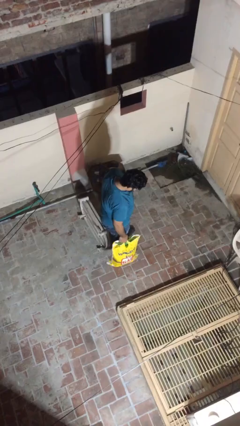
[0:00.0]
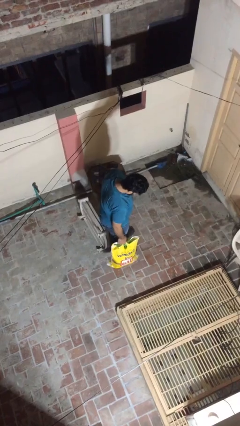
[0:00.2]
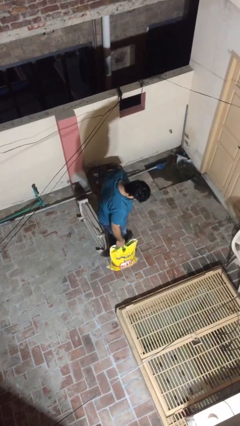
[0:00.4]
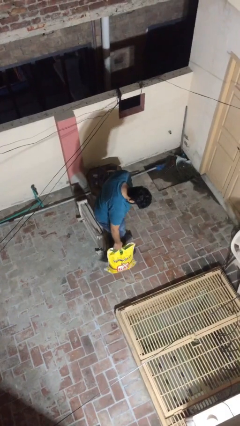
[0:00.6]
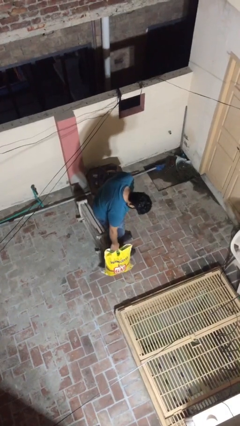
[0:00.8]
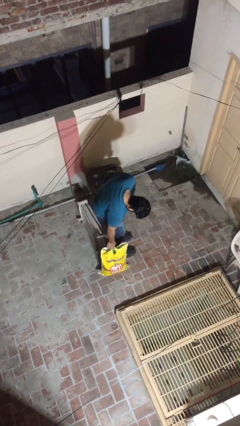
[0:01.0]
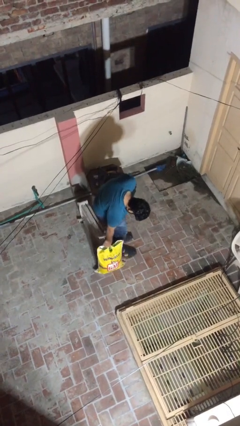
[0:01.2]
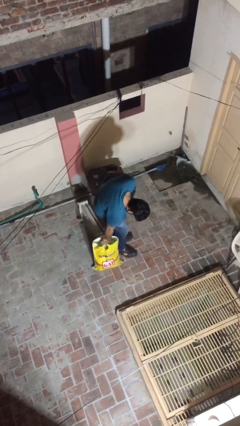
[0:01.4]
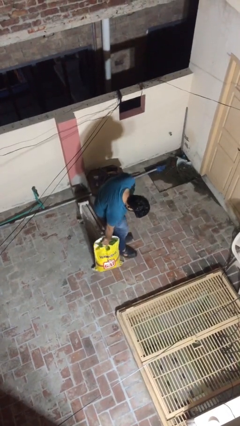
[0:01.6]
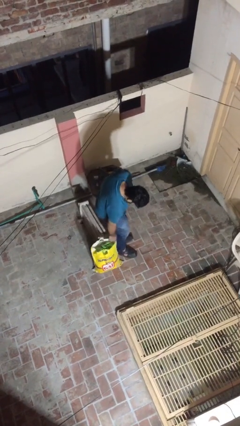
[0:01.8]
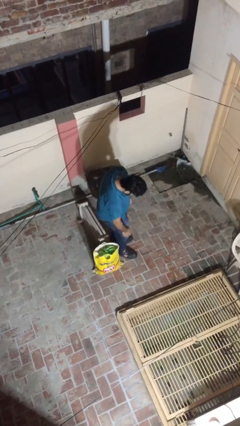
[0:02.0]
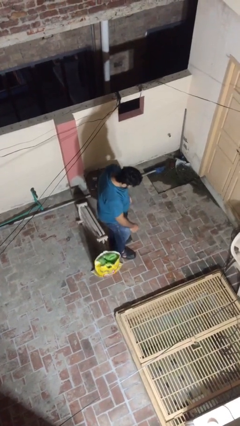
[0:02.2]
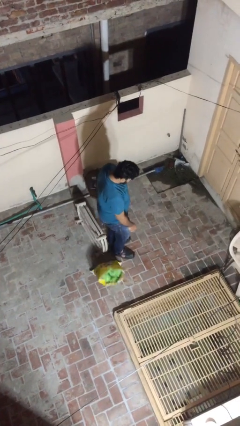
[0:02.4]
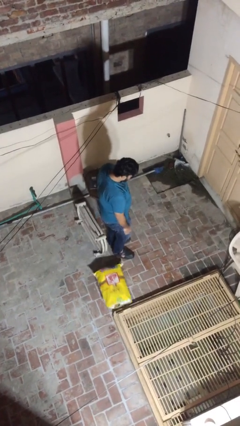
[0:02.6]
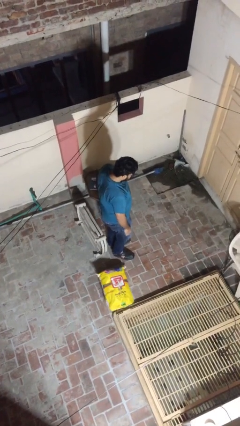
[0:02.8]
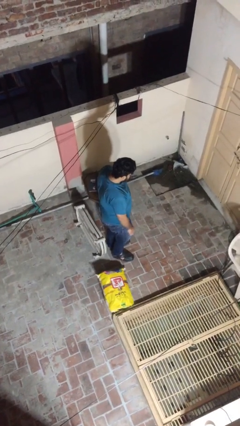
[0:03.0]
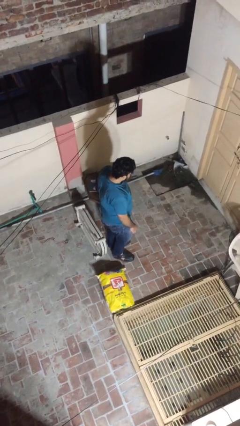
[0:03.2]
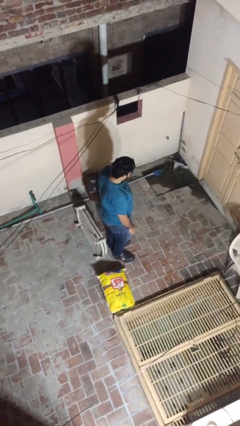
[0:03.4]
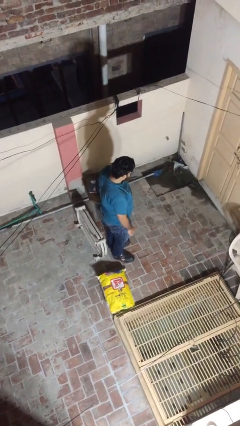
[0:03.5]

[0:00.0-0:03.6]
person puts down object on floor

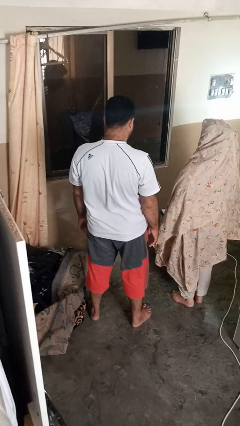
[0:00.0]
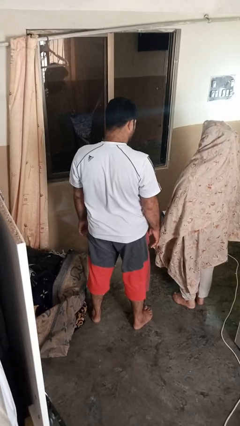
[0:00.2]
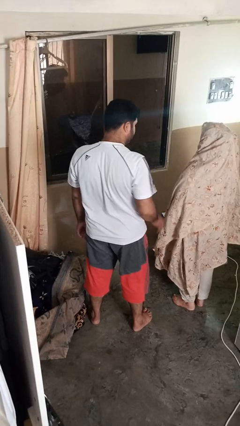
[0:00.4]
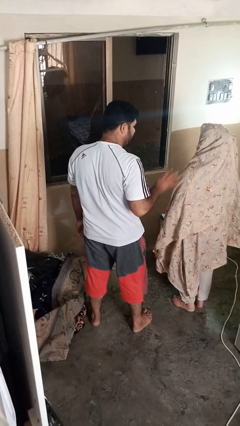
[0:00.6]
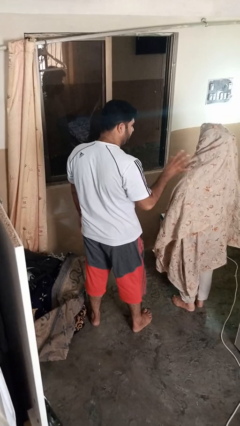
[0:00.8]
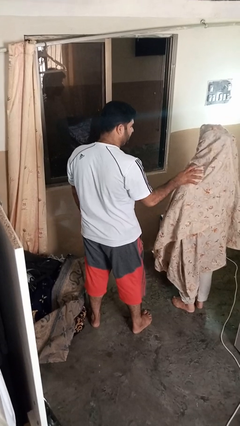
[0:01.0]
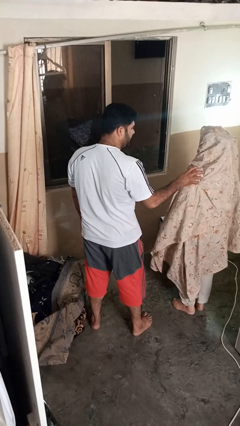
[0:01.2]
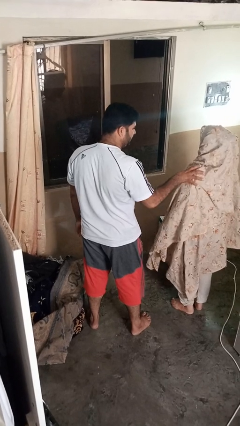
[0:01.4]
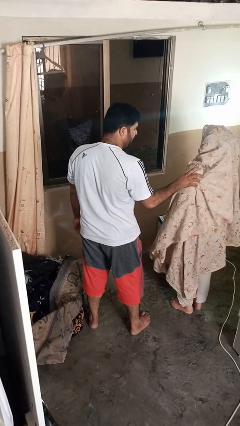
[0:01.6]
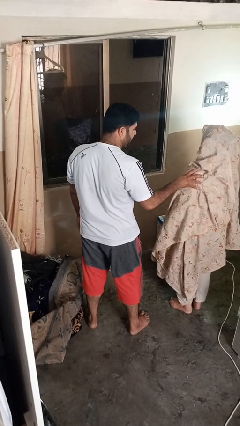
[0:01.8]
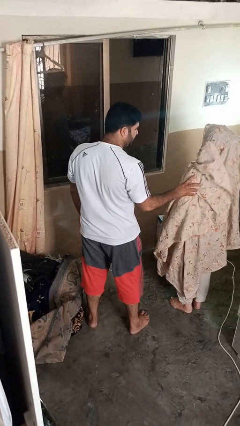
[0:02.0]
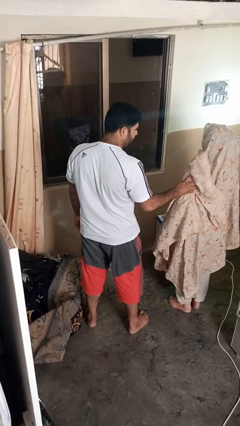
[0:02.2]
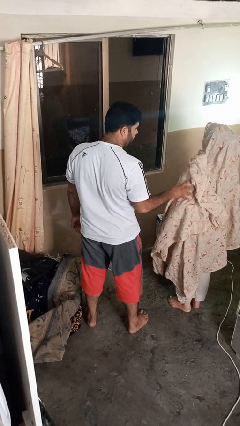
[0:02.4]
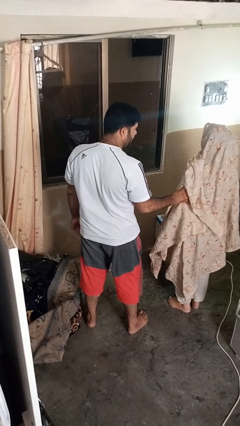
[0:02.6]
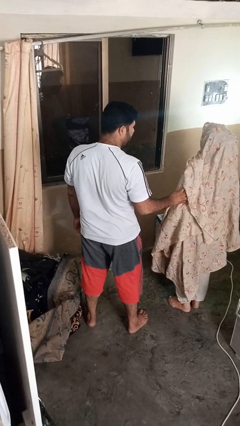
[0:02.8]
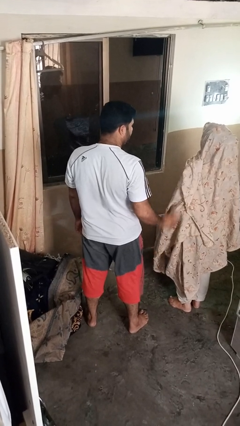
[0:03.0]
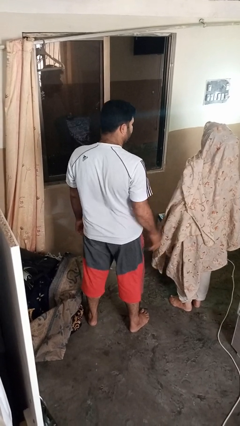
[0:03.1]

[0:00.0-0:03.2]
person grabs person by bicep

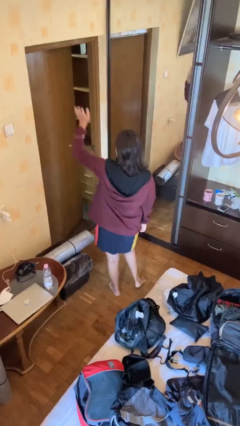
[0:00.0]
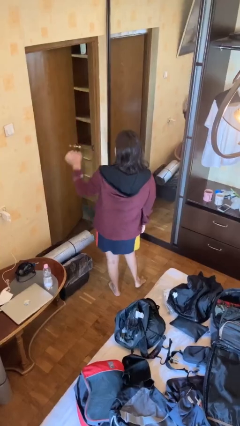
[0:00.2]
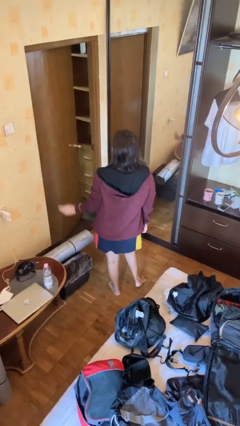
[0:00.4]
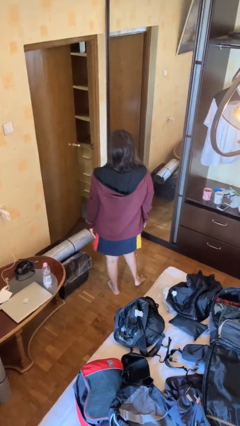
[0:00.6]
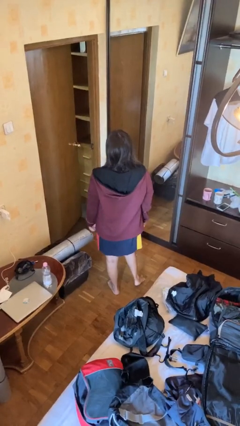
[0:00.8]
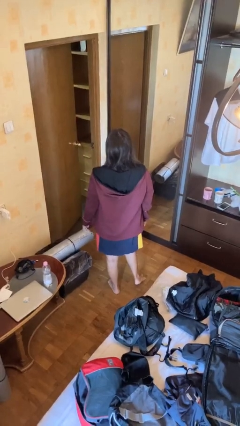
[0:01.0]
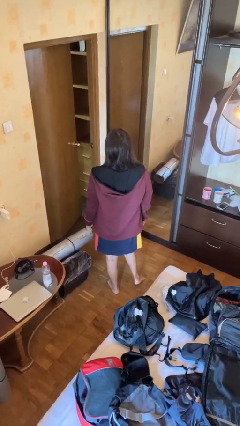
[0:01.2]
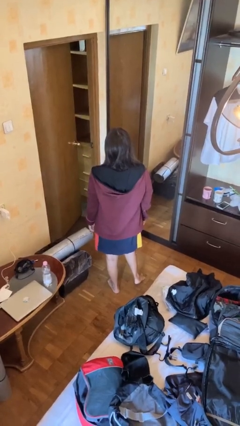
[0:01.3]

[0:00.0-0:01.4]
person gestures swipe down

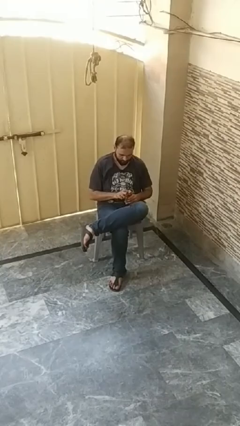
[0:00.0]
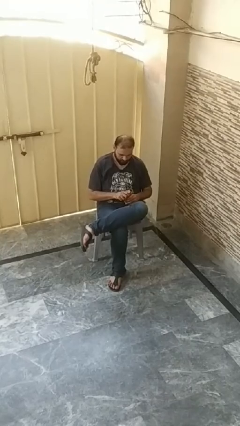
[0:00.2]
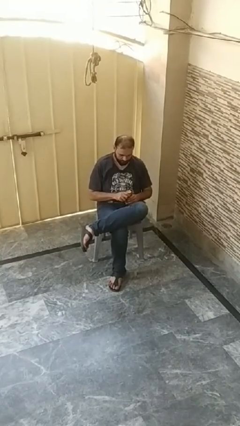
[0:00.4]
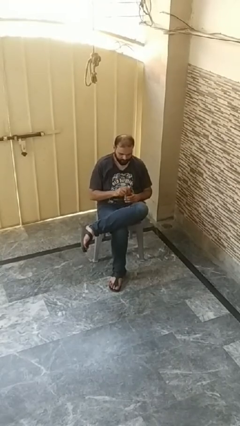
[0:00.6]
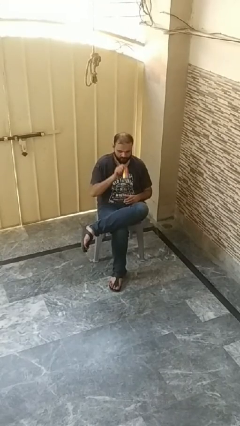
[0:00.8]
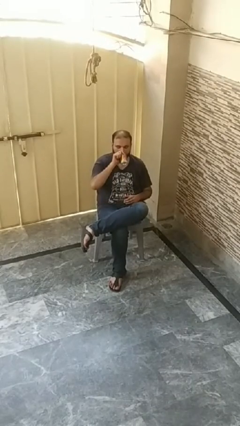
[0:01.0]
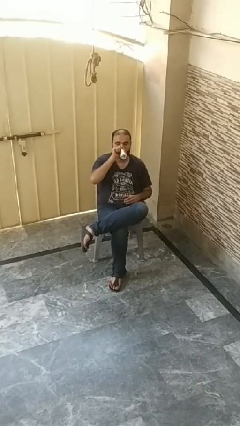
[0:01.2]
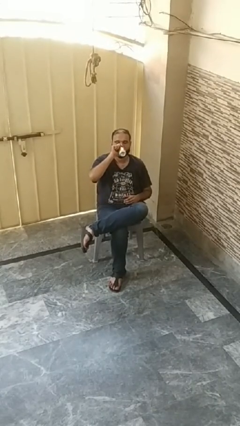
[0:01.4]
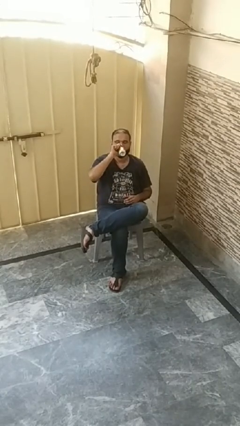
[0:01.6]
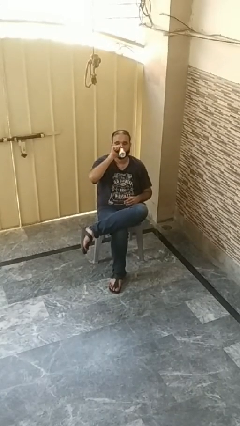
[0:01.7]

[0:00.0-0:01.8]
person drinks from beverage can

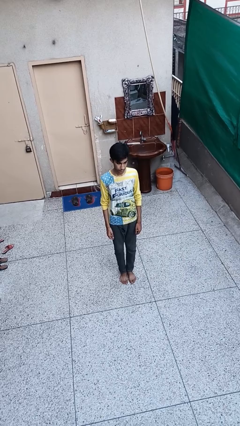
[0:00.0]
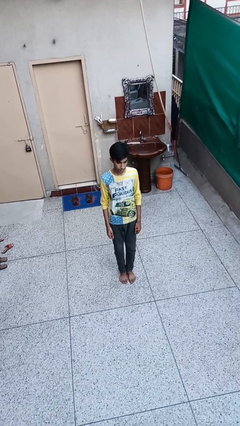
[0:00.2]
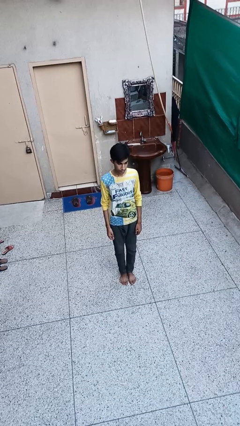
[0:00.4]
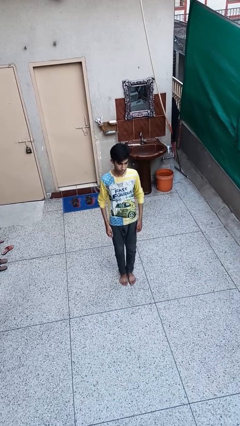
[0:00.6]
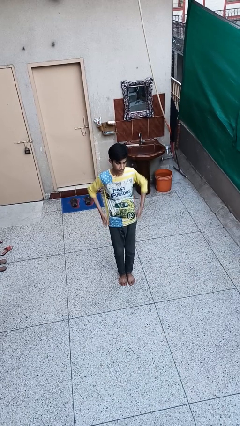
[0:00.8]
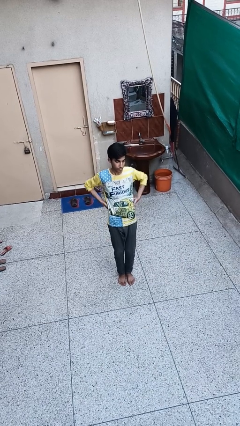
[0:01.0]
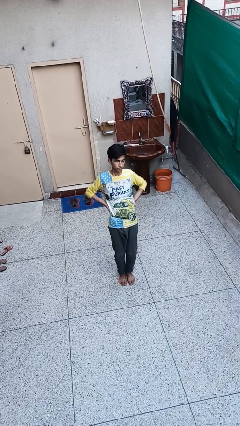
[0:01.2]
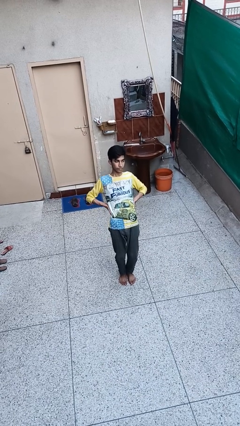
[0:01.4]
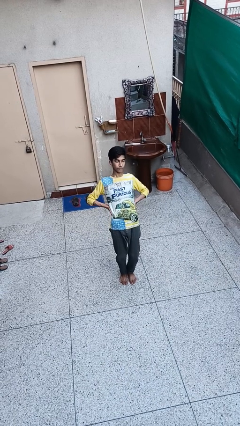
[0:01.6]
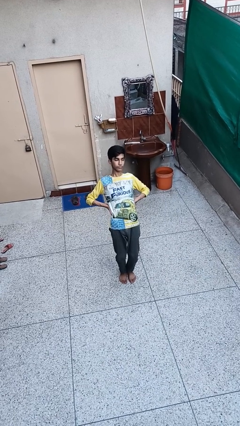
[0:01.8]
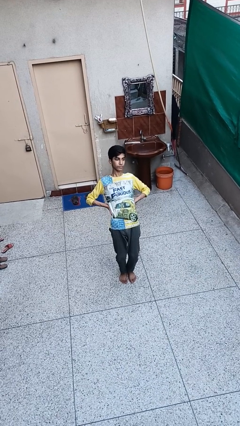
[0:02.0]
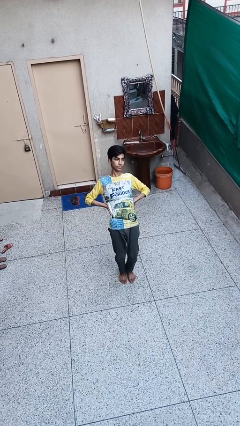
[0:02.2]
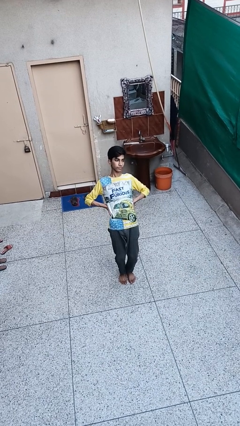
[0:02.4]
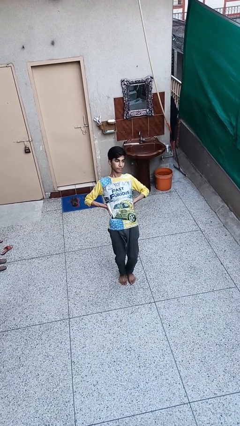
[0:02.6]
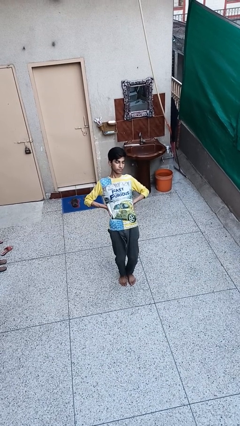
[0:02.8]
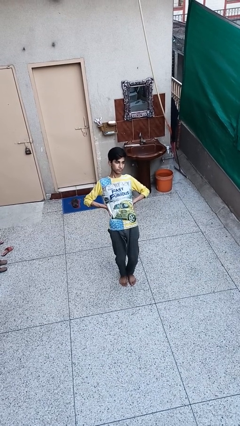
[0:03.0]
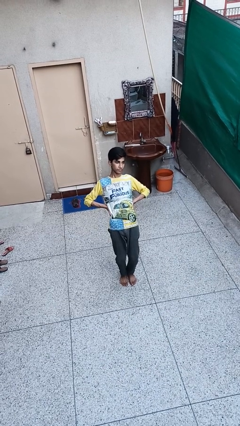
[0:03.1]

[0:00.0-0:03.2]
person stretches back

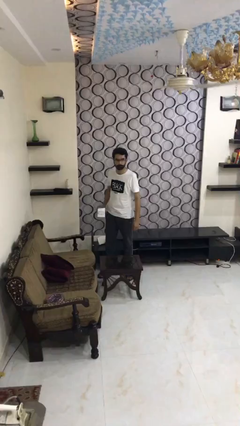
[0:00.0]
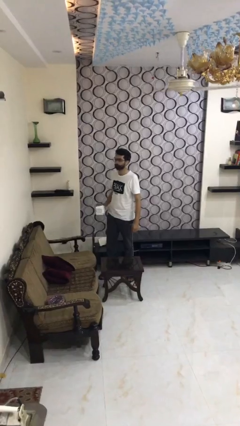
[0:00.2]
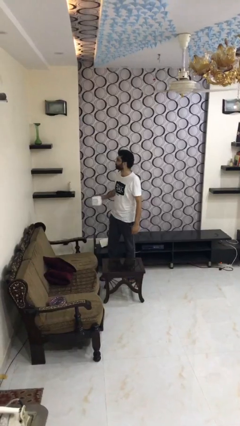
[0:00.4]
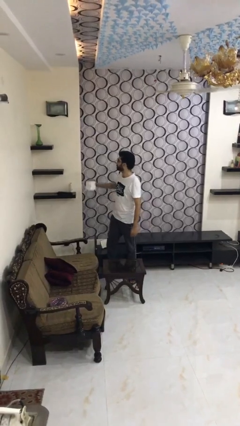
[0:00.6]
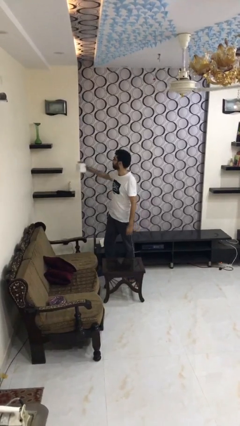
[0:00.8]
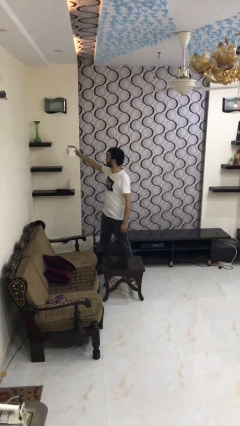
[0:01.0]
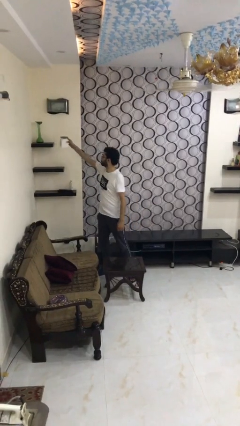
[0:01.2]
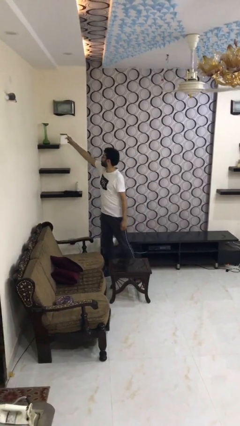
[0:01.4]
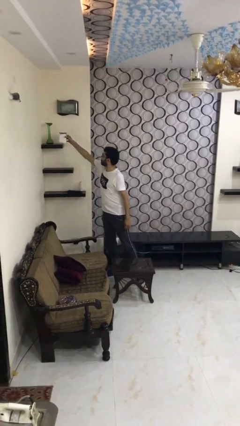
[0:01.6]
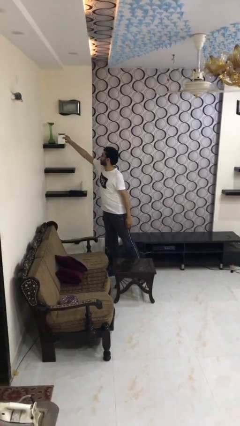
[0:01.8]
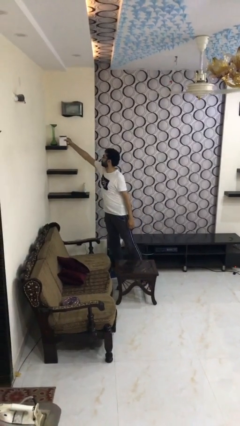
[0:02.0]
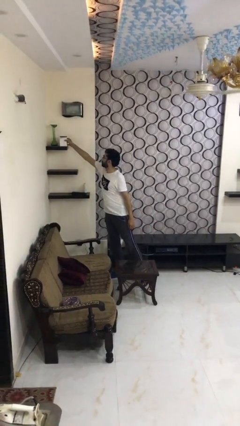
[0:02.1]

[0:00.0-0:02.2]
person puts down object on shelf

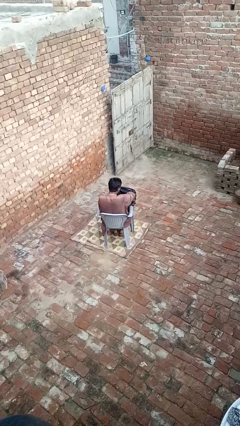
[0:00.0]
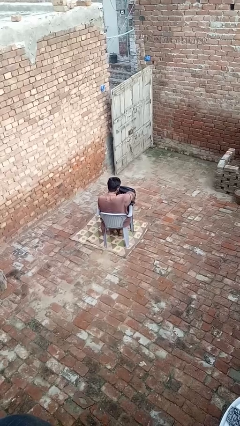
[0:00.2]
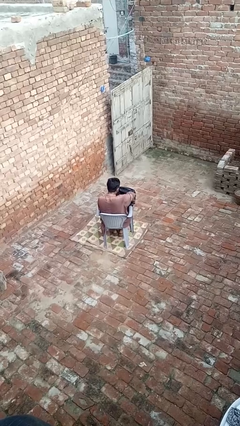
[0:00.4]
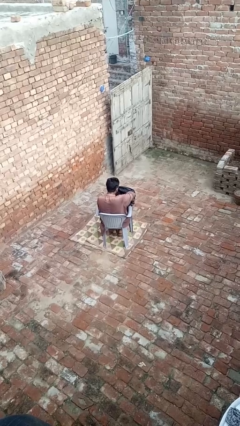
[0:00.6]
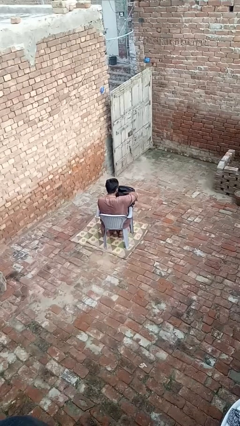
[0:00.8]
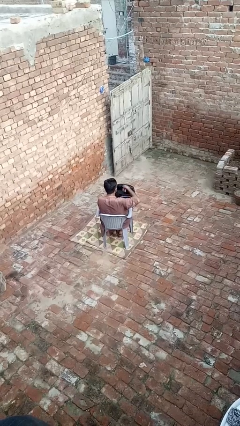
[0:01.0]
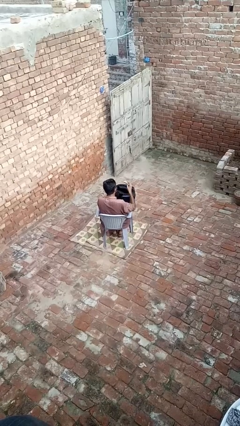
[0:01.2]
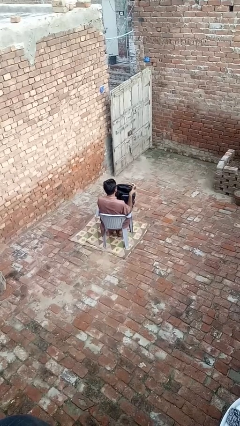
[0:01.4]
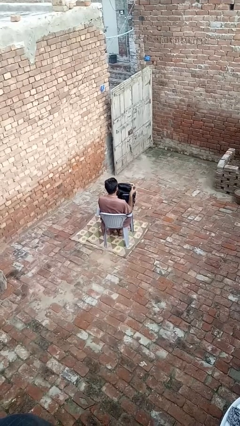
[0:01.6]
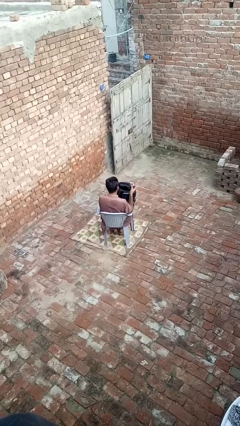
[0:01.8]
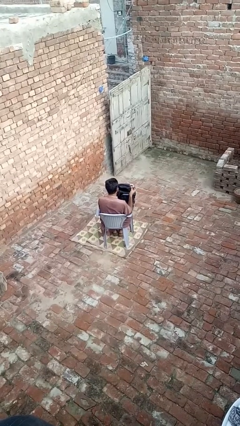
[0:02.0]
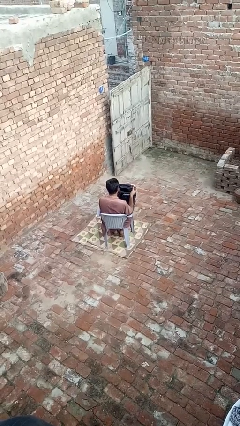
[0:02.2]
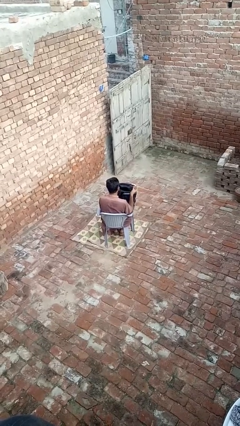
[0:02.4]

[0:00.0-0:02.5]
person takes object from backpack
